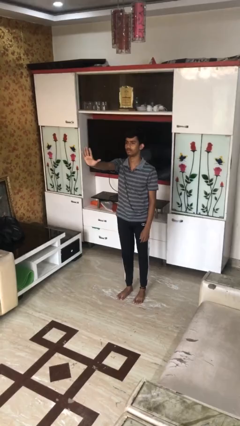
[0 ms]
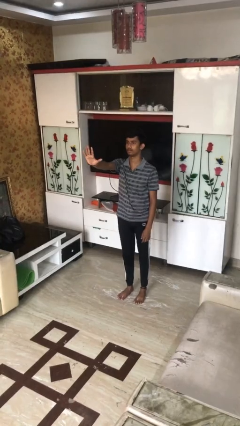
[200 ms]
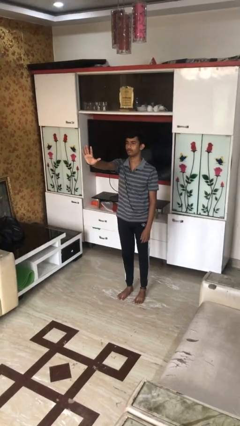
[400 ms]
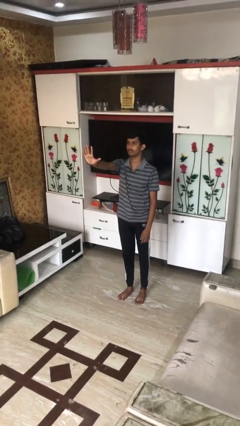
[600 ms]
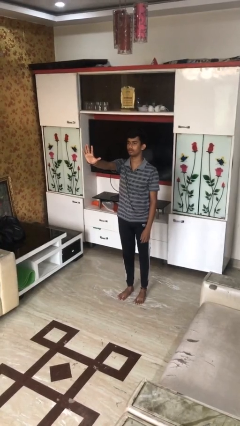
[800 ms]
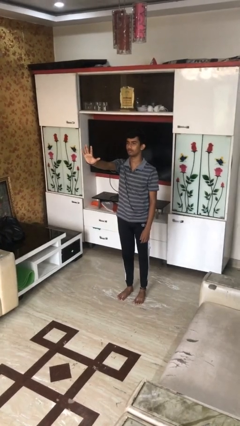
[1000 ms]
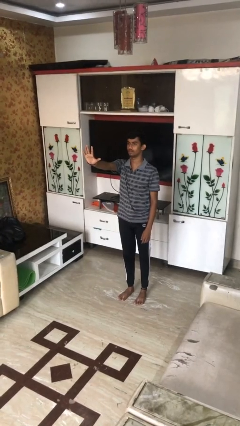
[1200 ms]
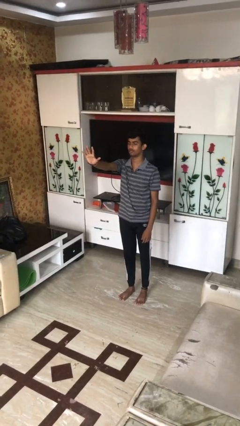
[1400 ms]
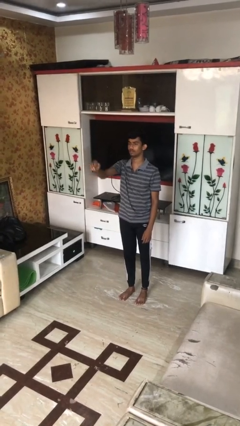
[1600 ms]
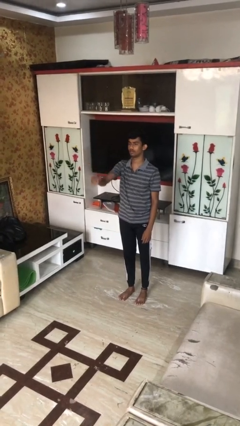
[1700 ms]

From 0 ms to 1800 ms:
person gestures number five

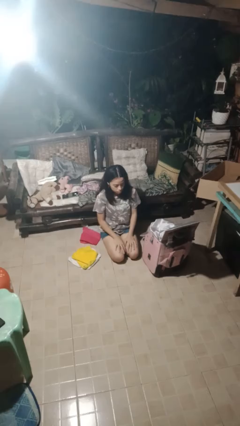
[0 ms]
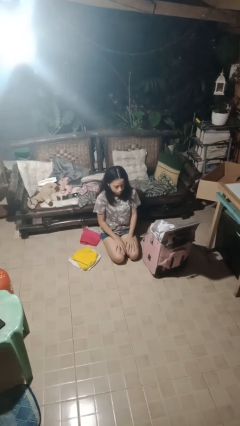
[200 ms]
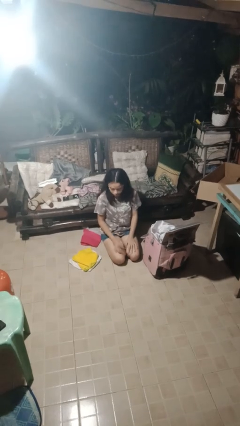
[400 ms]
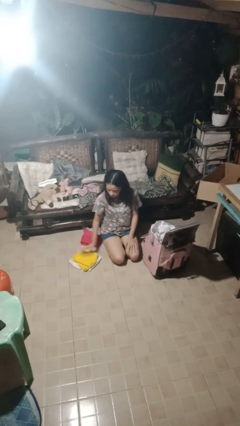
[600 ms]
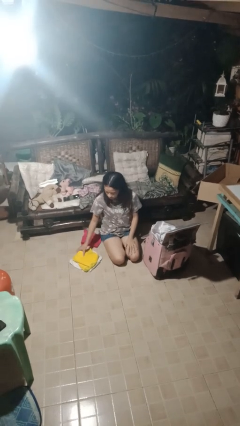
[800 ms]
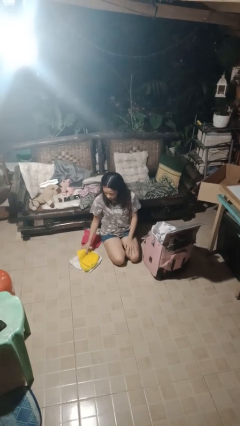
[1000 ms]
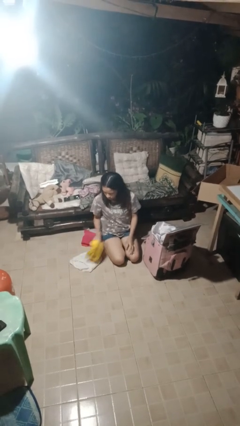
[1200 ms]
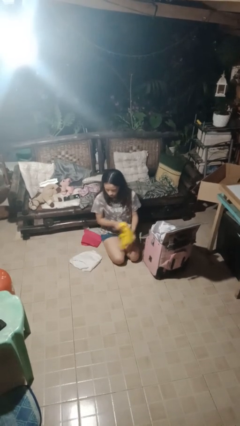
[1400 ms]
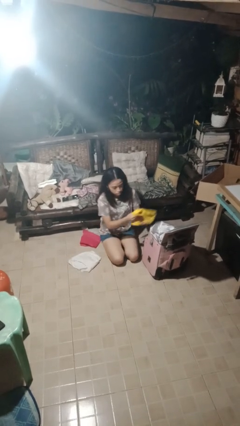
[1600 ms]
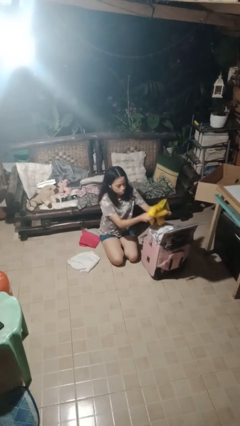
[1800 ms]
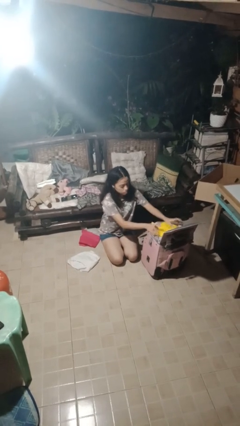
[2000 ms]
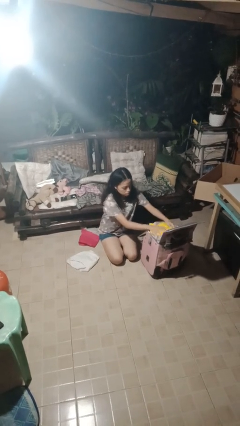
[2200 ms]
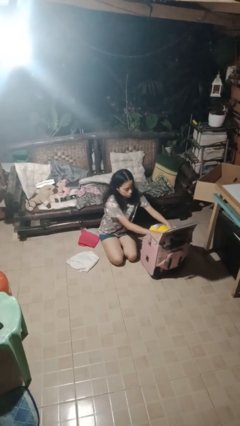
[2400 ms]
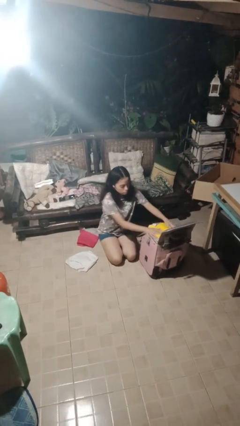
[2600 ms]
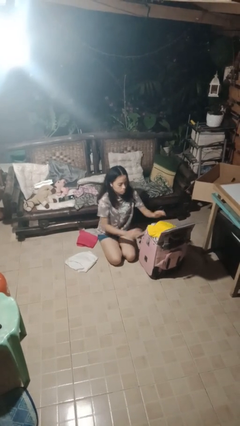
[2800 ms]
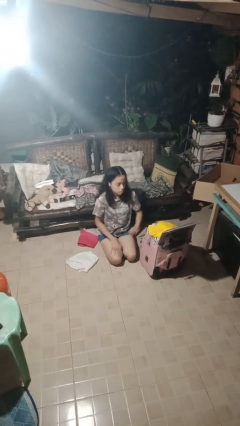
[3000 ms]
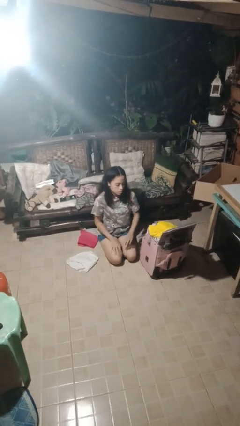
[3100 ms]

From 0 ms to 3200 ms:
person loads clothes into suitcase

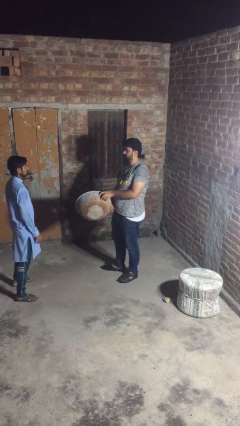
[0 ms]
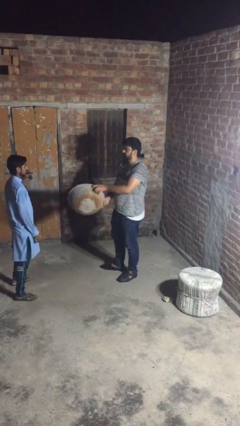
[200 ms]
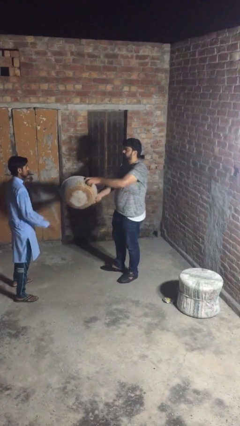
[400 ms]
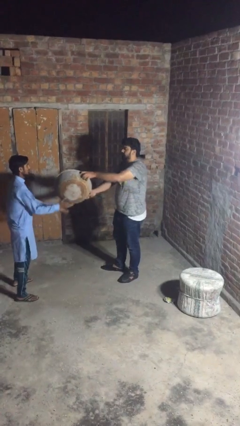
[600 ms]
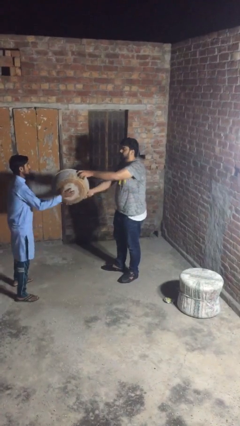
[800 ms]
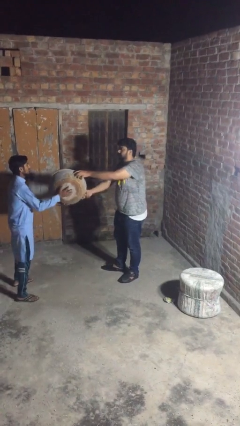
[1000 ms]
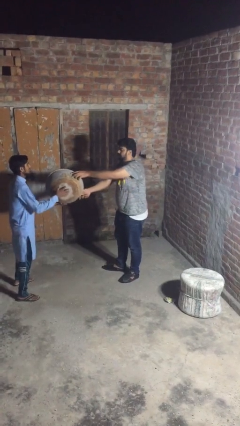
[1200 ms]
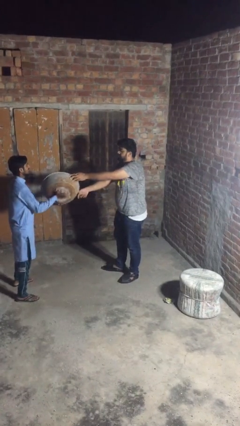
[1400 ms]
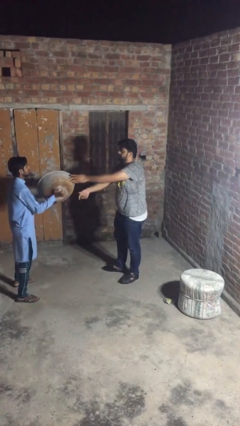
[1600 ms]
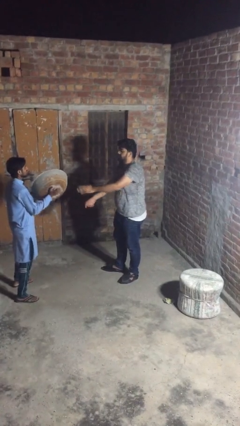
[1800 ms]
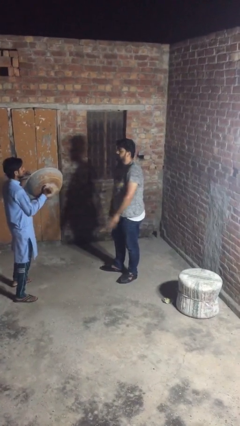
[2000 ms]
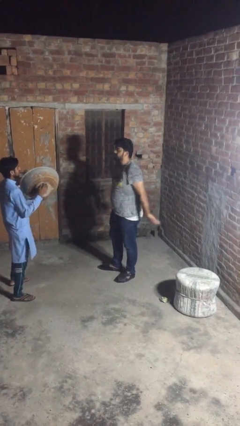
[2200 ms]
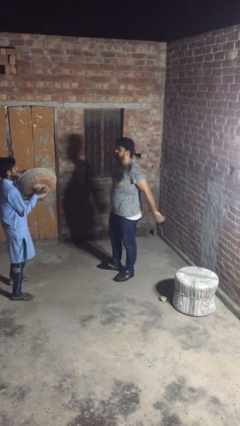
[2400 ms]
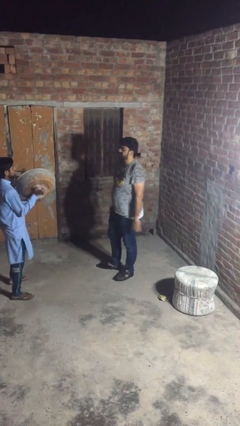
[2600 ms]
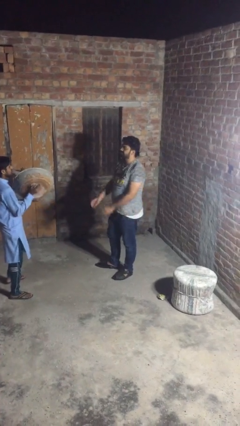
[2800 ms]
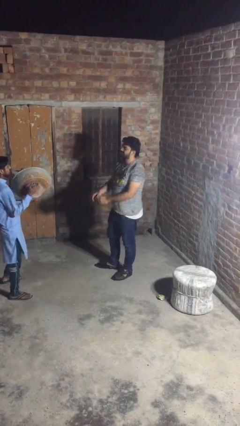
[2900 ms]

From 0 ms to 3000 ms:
person transfers object to person

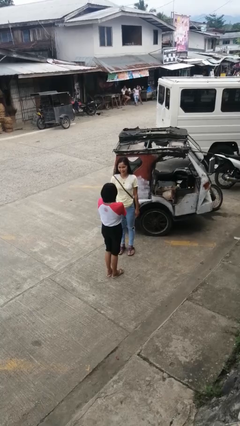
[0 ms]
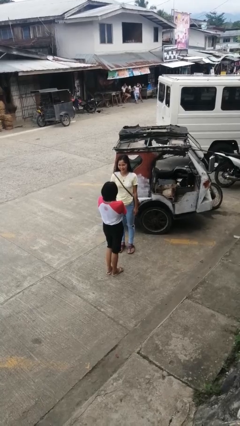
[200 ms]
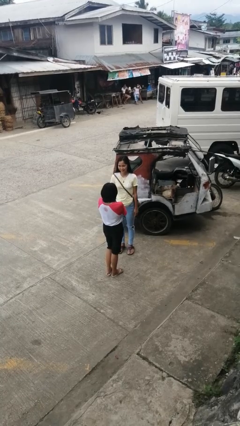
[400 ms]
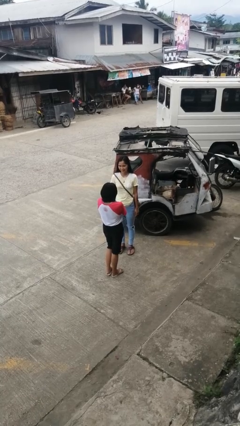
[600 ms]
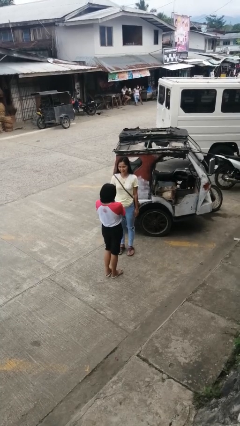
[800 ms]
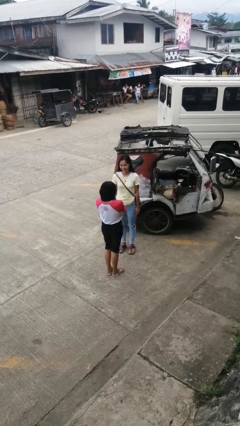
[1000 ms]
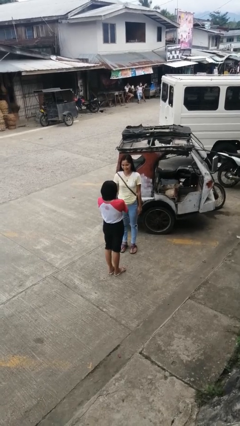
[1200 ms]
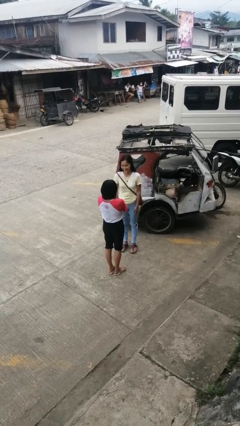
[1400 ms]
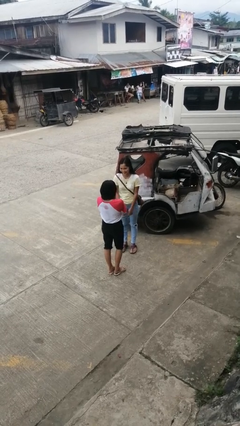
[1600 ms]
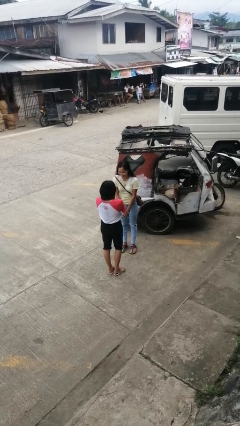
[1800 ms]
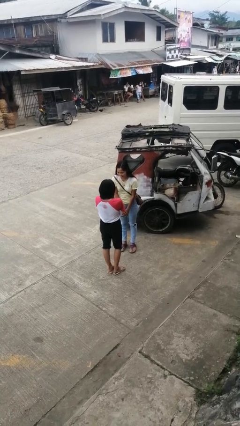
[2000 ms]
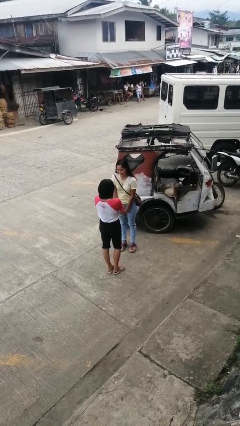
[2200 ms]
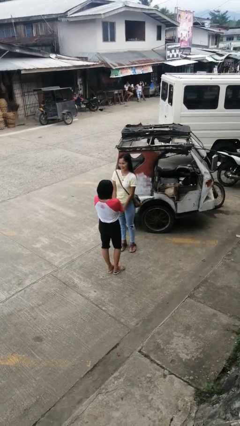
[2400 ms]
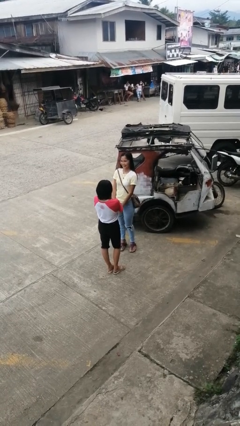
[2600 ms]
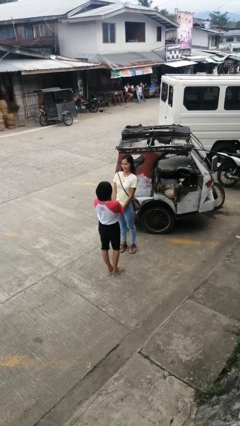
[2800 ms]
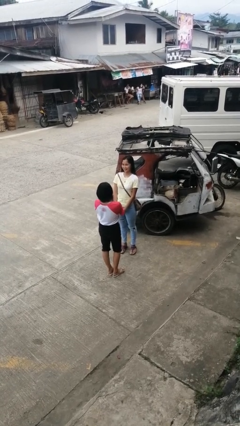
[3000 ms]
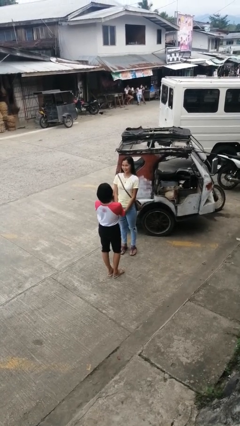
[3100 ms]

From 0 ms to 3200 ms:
person laughs with person

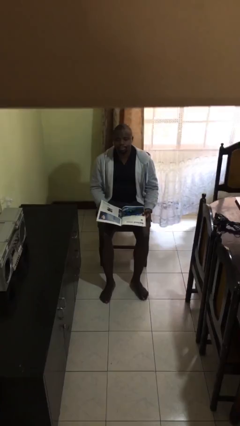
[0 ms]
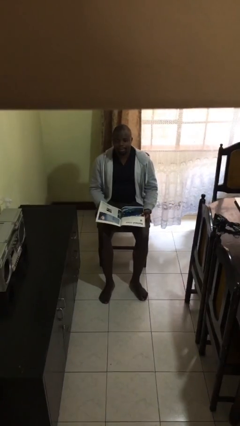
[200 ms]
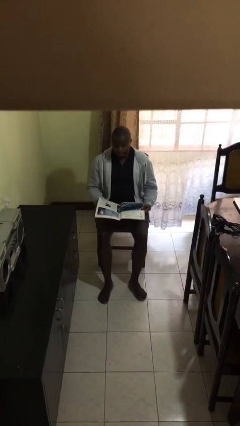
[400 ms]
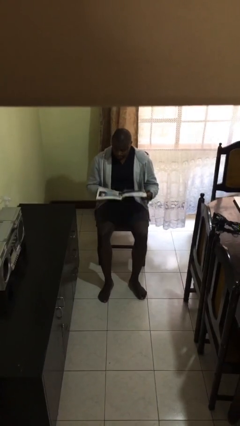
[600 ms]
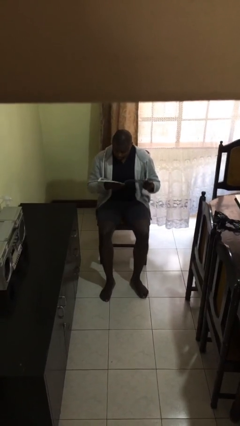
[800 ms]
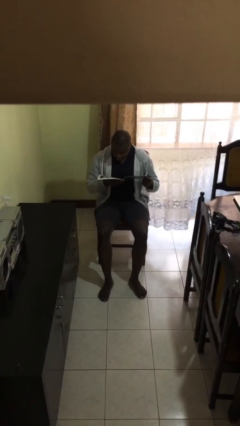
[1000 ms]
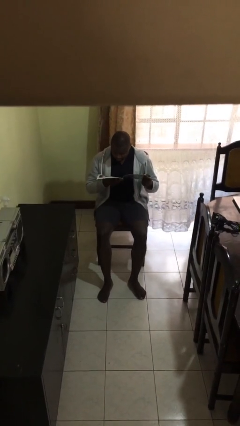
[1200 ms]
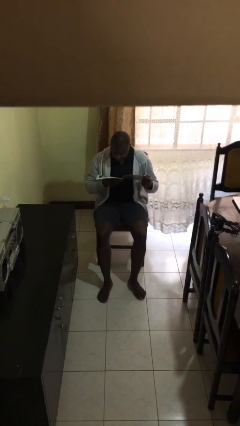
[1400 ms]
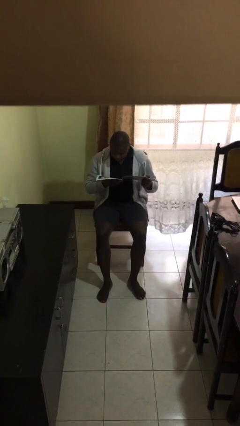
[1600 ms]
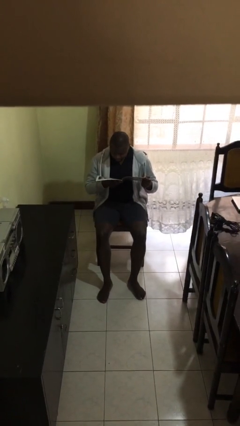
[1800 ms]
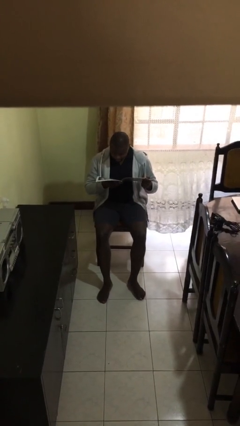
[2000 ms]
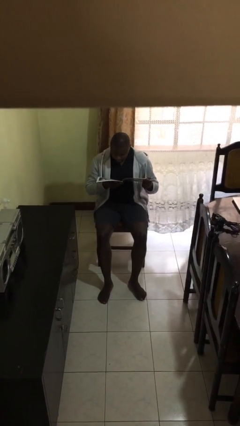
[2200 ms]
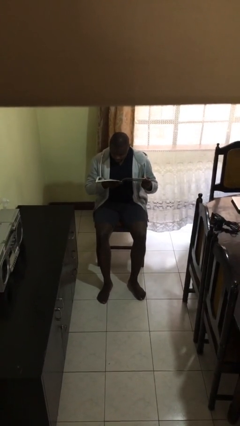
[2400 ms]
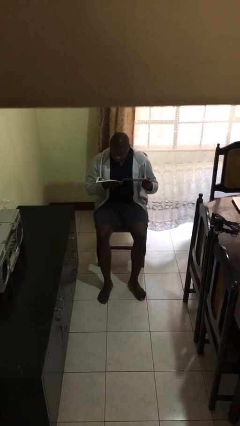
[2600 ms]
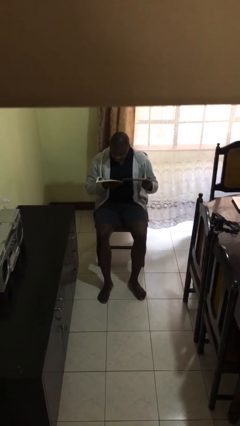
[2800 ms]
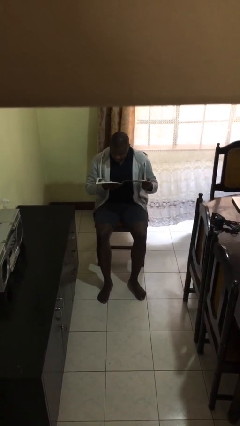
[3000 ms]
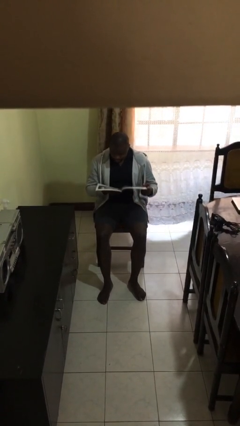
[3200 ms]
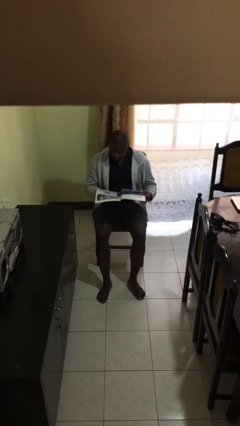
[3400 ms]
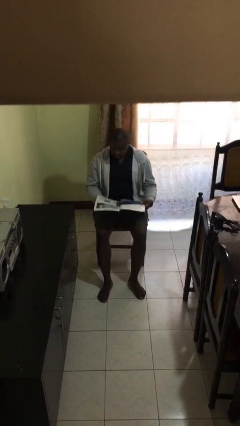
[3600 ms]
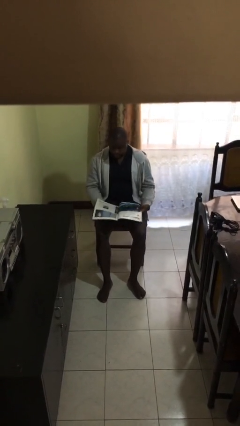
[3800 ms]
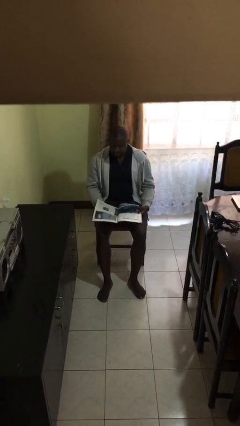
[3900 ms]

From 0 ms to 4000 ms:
person reads document

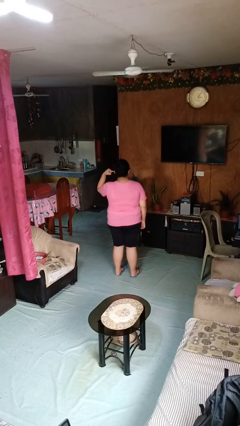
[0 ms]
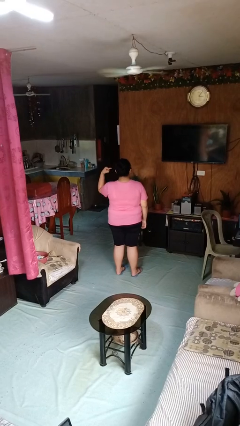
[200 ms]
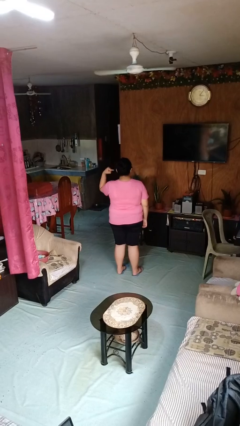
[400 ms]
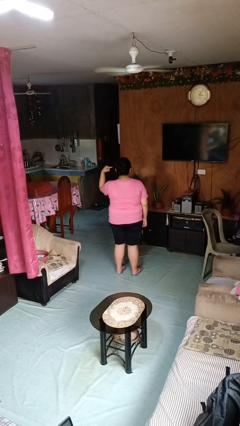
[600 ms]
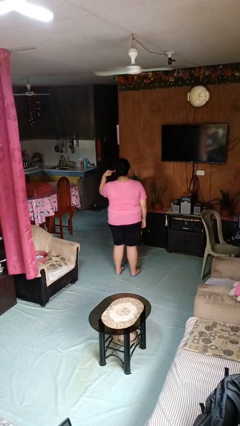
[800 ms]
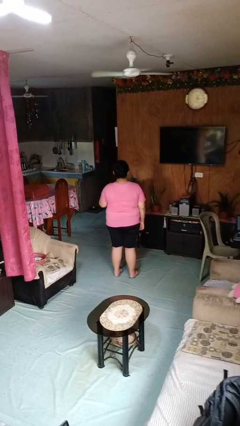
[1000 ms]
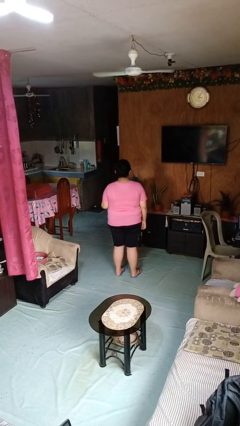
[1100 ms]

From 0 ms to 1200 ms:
person gestures listen closely

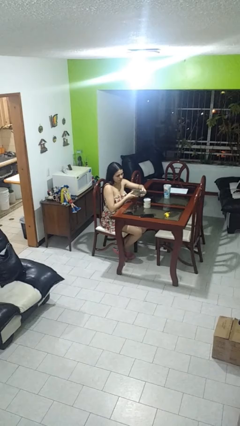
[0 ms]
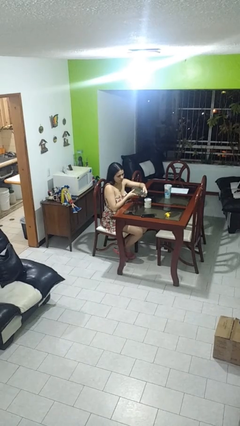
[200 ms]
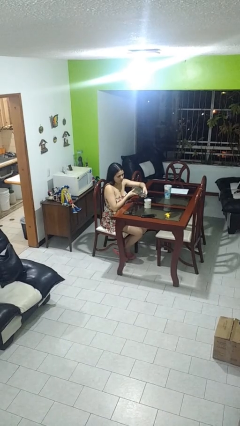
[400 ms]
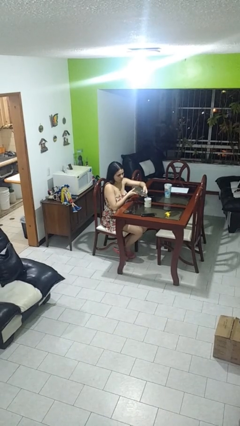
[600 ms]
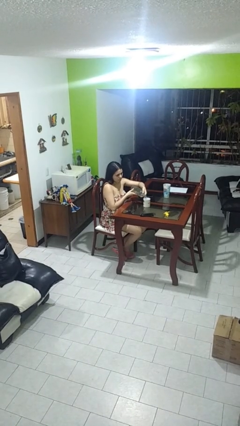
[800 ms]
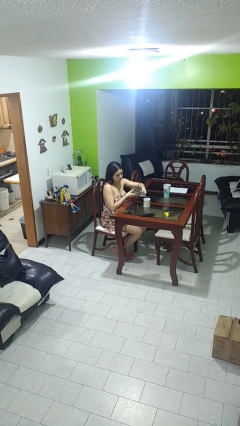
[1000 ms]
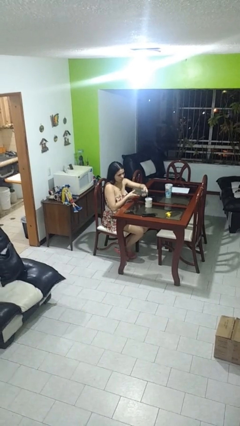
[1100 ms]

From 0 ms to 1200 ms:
person pours liquid into cup
